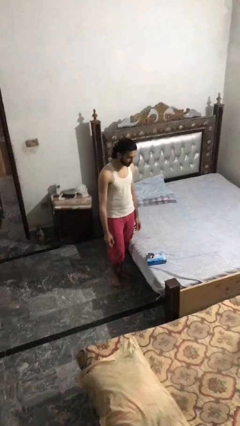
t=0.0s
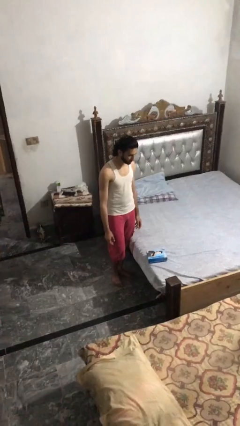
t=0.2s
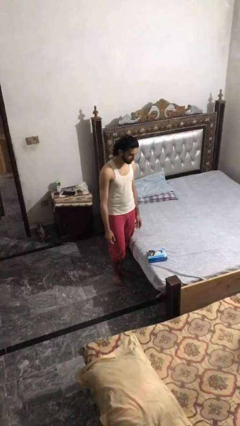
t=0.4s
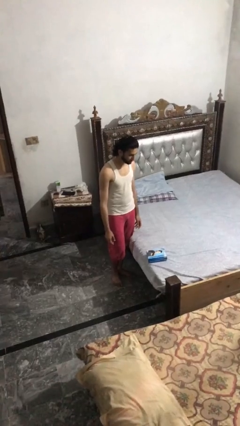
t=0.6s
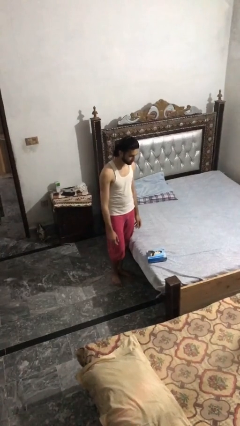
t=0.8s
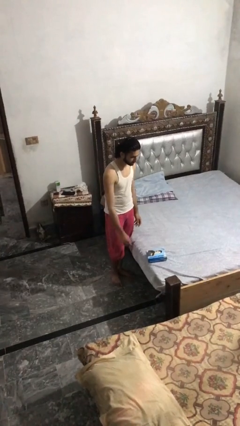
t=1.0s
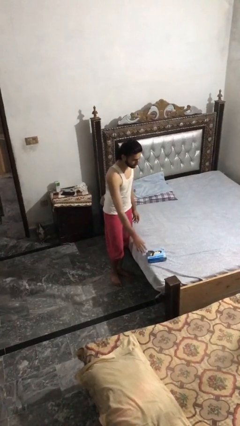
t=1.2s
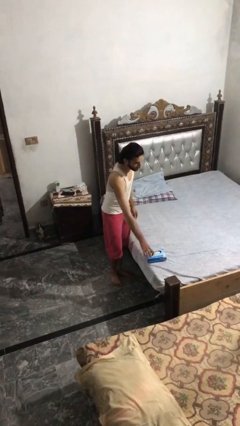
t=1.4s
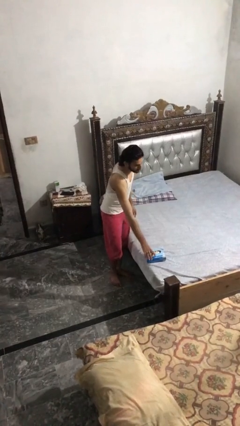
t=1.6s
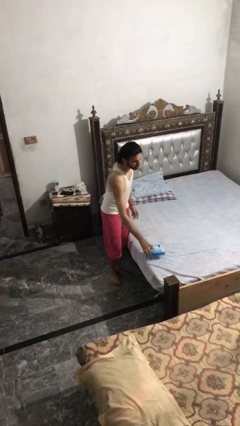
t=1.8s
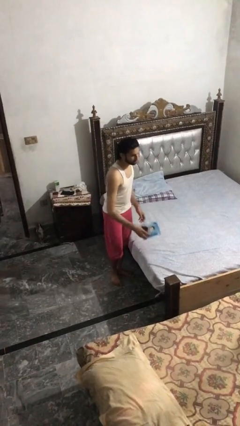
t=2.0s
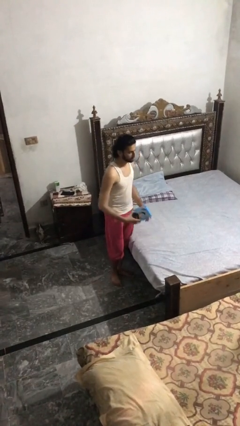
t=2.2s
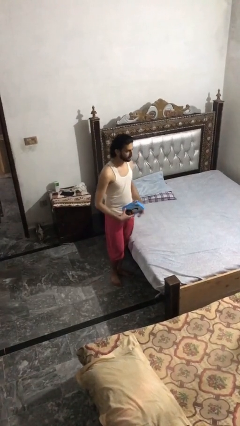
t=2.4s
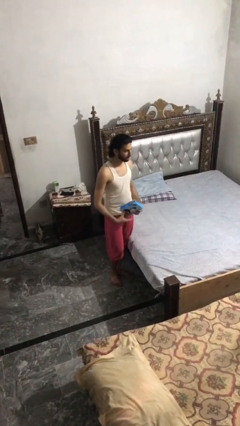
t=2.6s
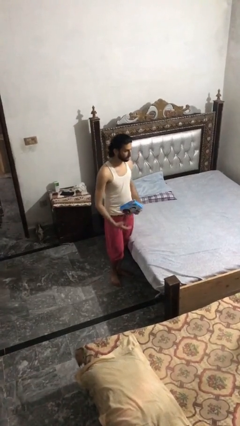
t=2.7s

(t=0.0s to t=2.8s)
person picks up object from bed

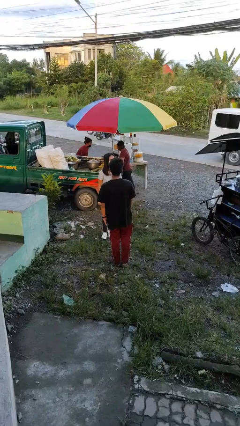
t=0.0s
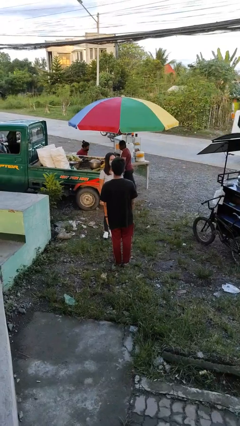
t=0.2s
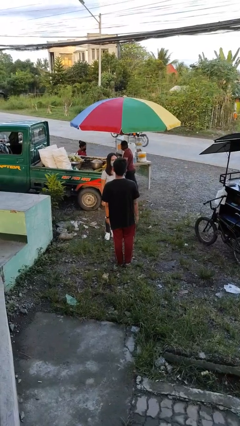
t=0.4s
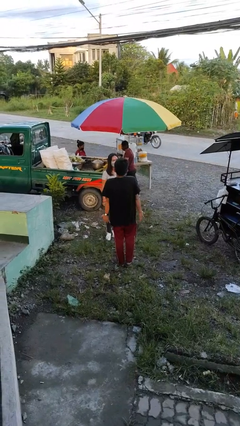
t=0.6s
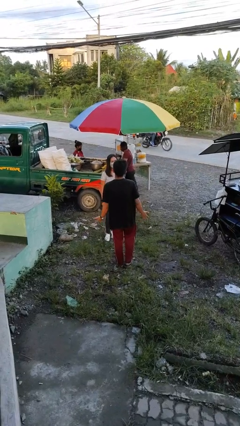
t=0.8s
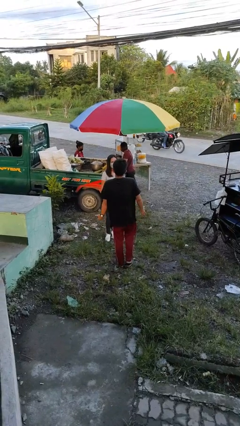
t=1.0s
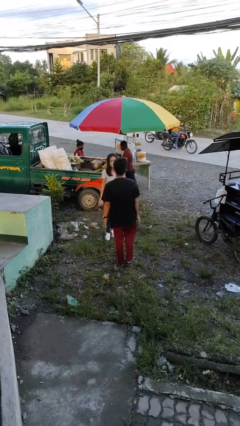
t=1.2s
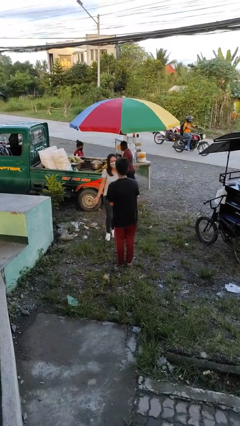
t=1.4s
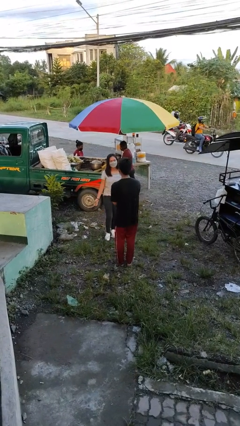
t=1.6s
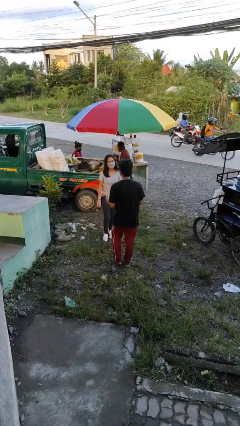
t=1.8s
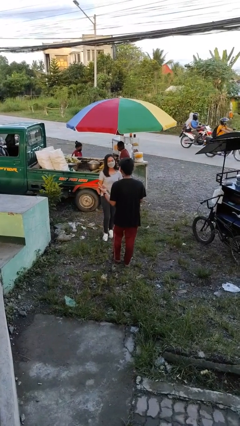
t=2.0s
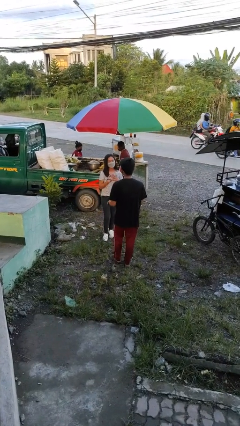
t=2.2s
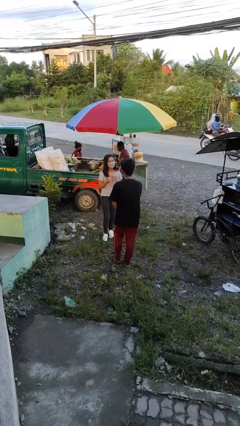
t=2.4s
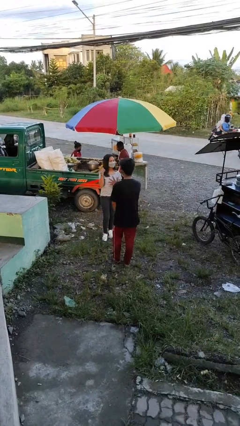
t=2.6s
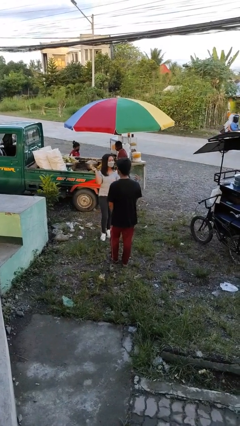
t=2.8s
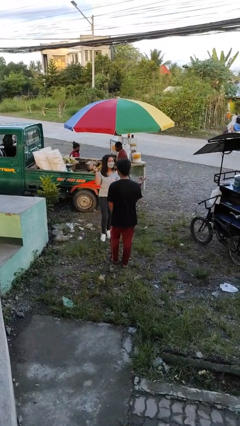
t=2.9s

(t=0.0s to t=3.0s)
person talks to person

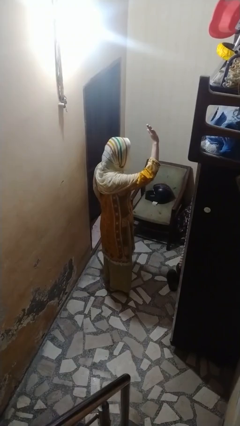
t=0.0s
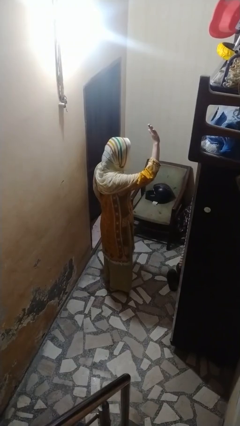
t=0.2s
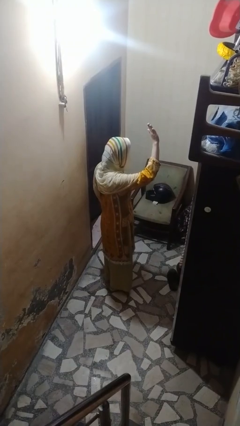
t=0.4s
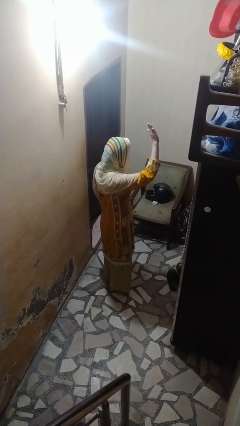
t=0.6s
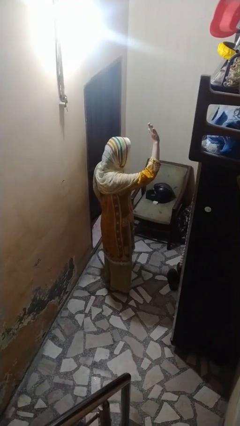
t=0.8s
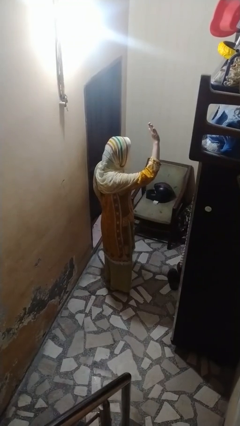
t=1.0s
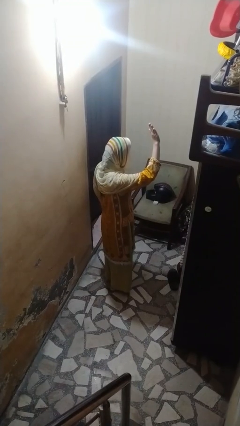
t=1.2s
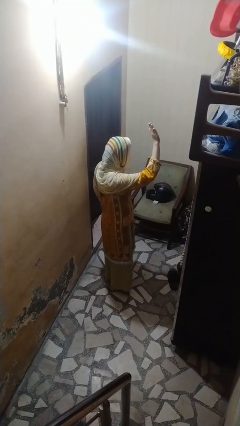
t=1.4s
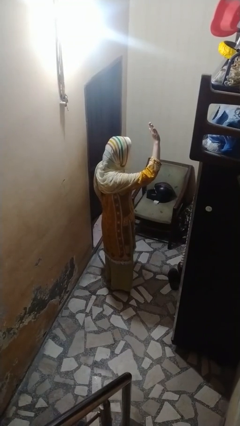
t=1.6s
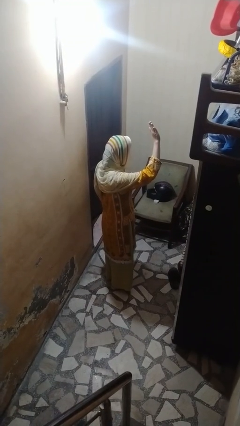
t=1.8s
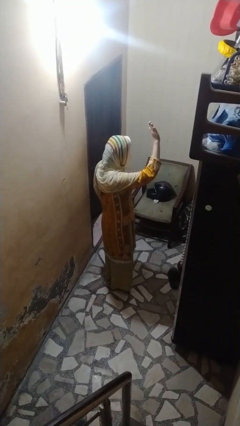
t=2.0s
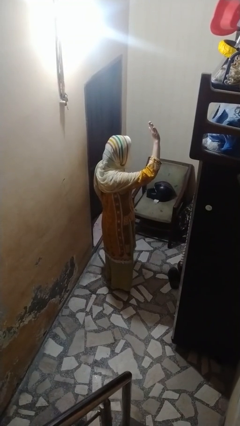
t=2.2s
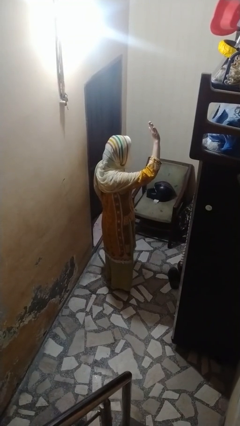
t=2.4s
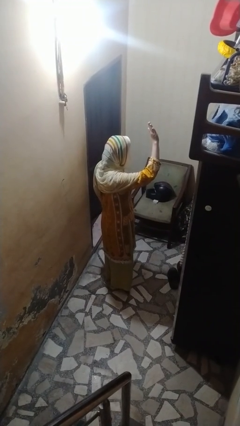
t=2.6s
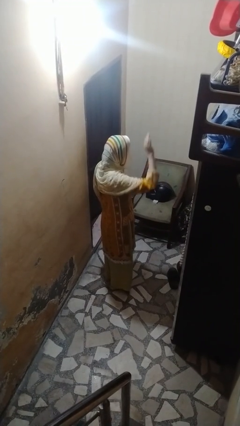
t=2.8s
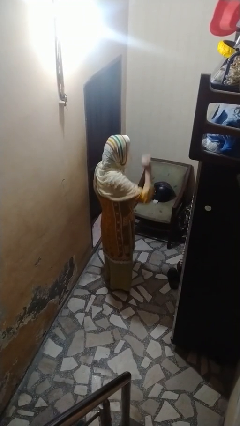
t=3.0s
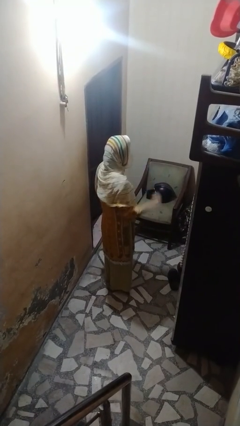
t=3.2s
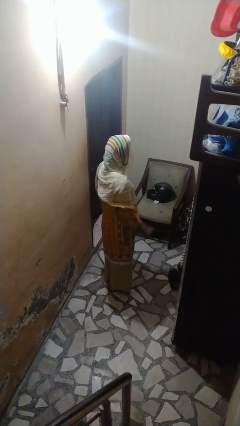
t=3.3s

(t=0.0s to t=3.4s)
person gestures raise hand

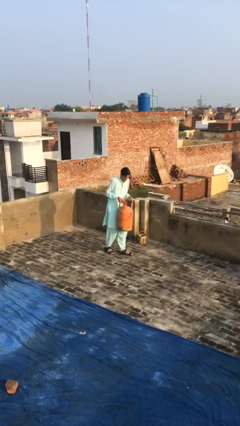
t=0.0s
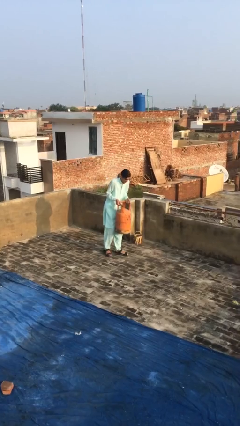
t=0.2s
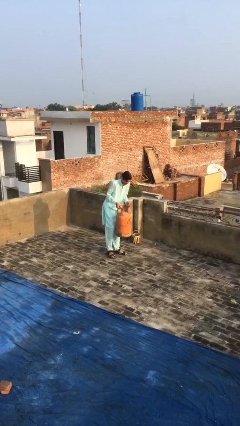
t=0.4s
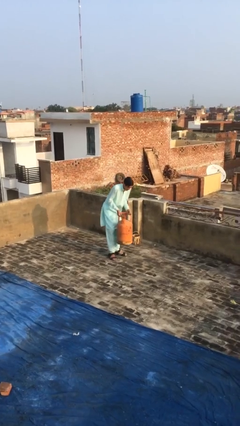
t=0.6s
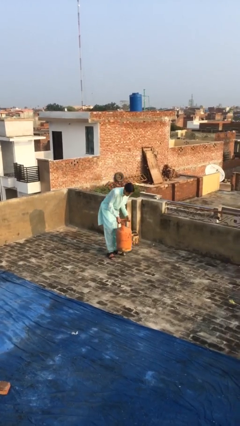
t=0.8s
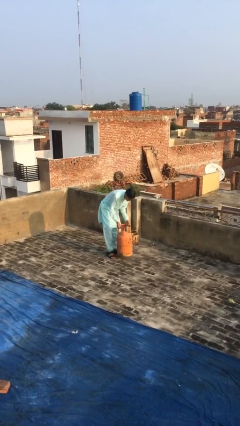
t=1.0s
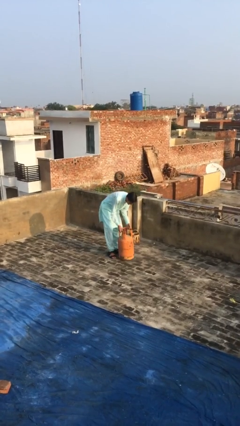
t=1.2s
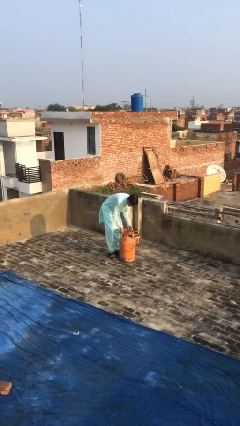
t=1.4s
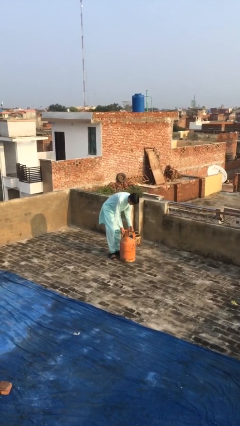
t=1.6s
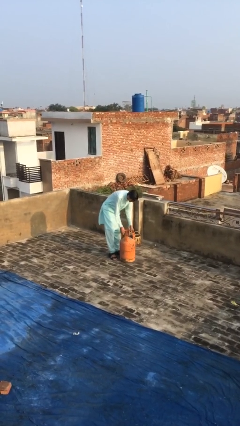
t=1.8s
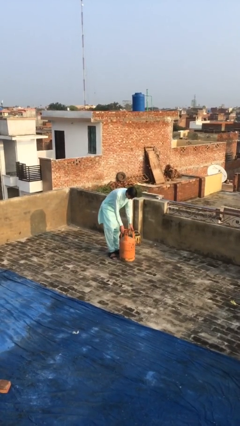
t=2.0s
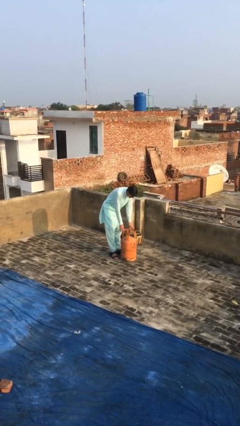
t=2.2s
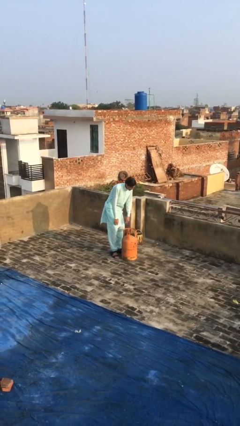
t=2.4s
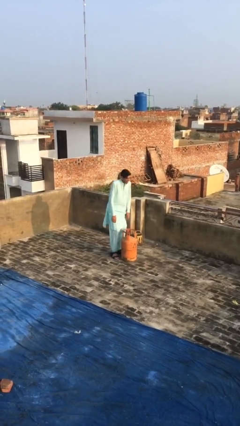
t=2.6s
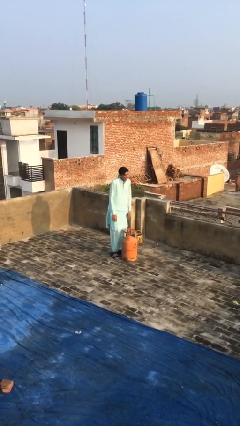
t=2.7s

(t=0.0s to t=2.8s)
person puts down object on floor

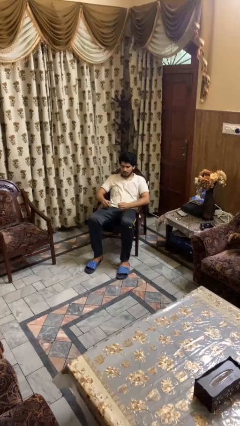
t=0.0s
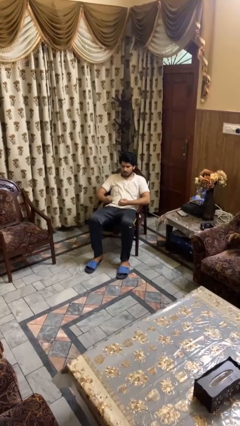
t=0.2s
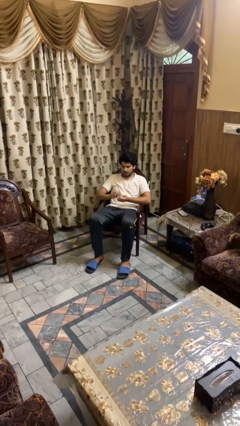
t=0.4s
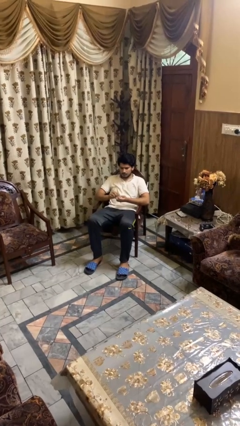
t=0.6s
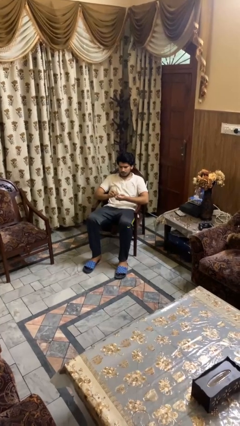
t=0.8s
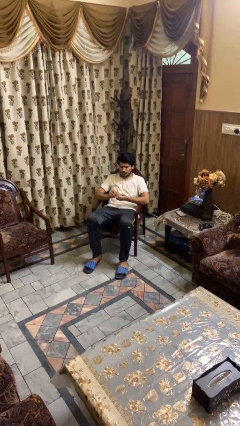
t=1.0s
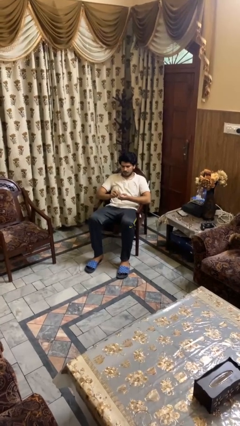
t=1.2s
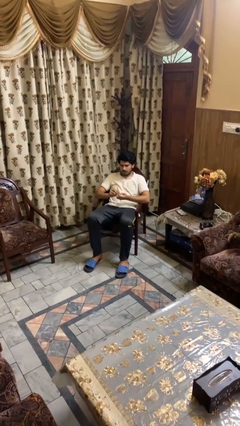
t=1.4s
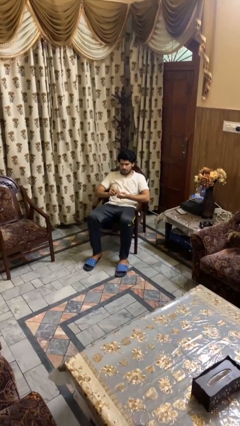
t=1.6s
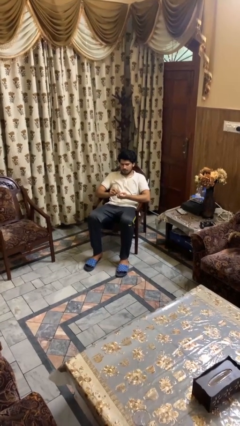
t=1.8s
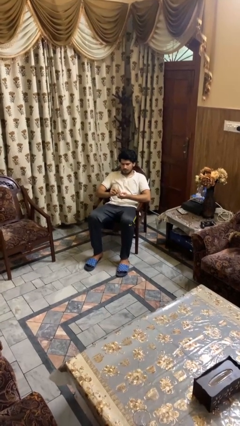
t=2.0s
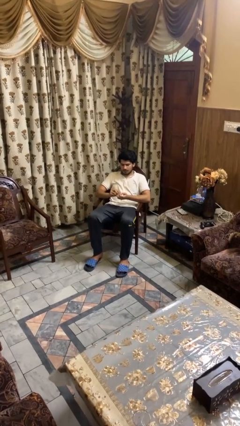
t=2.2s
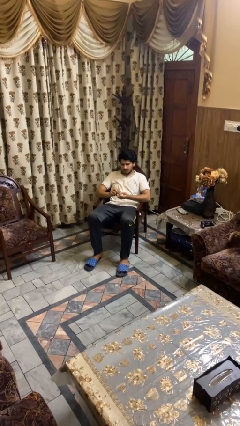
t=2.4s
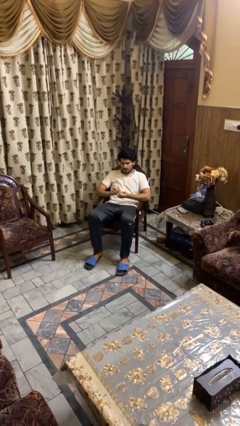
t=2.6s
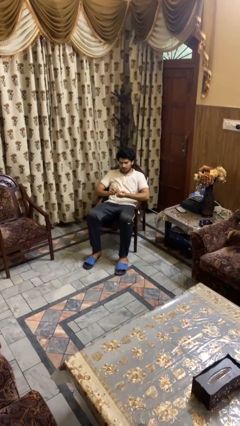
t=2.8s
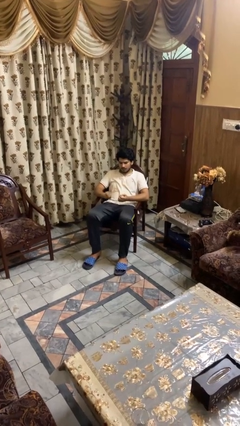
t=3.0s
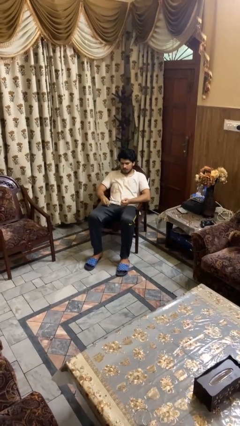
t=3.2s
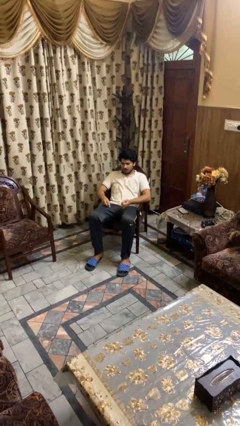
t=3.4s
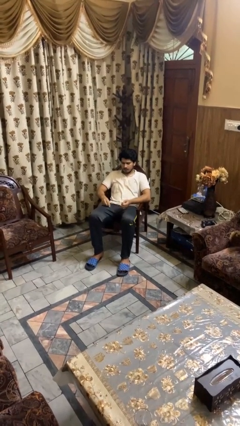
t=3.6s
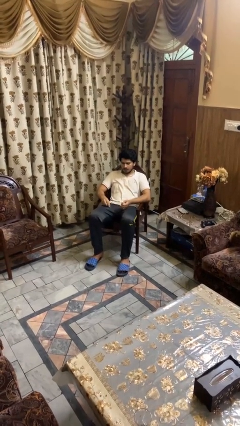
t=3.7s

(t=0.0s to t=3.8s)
person files fingernails

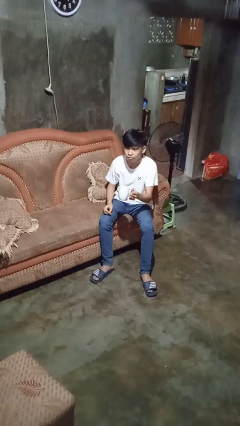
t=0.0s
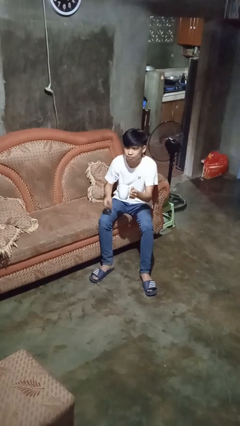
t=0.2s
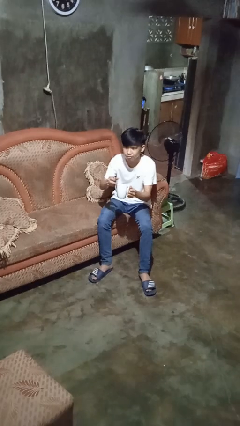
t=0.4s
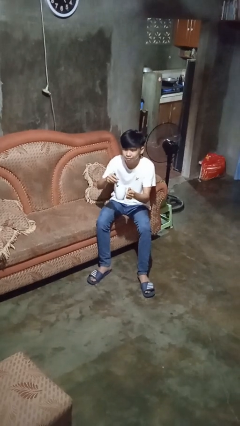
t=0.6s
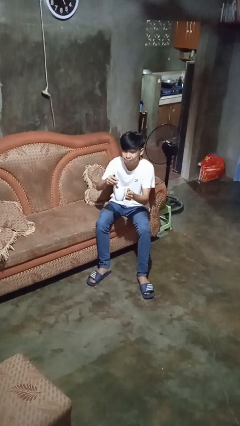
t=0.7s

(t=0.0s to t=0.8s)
person stirs mug

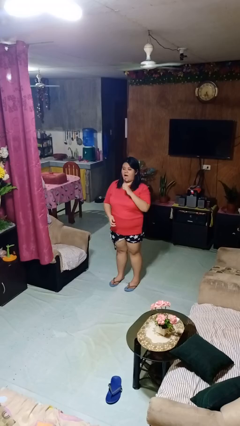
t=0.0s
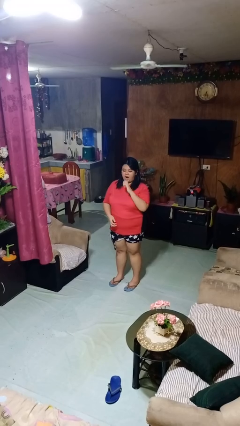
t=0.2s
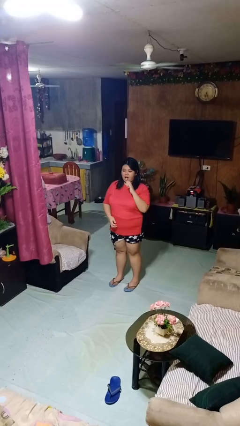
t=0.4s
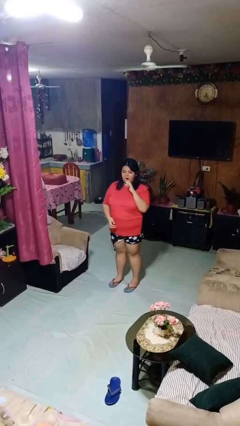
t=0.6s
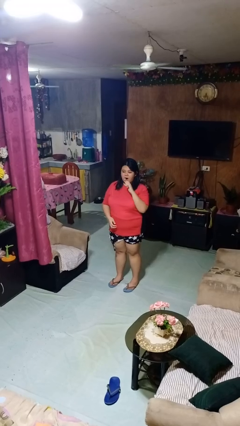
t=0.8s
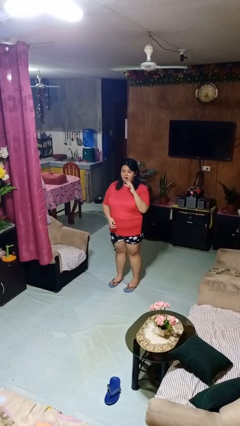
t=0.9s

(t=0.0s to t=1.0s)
person brushes teeth
